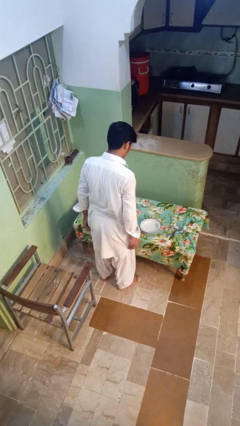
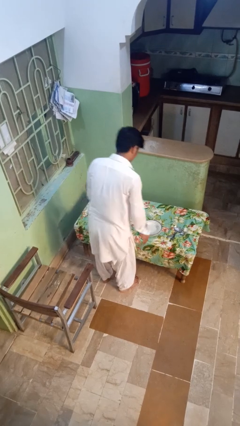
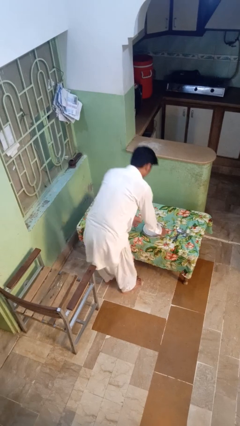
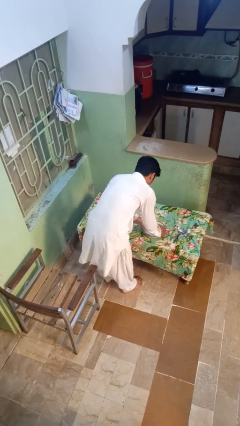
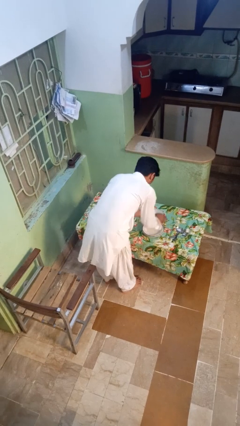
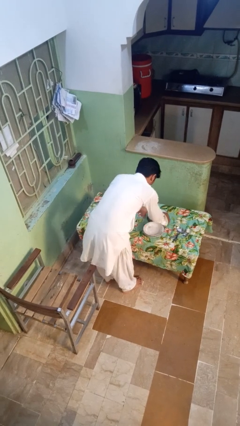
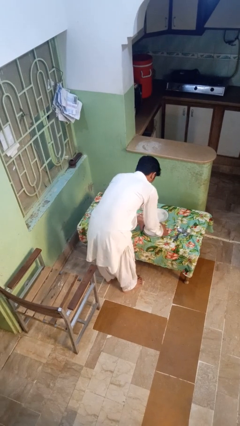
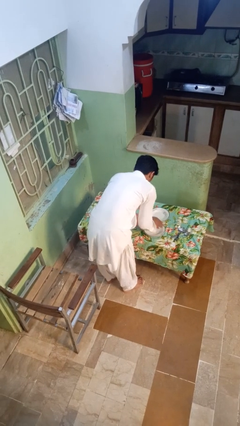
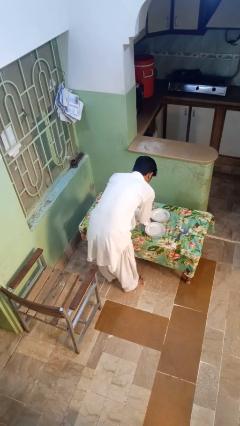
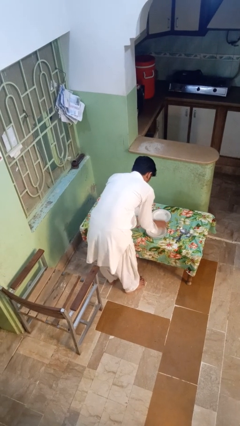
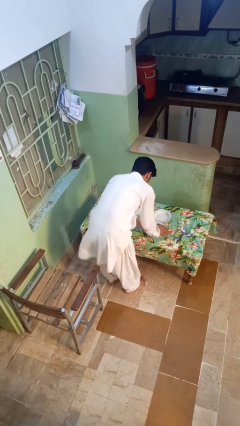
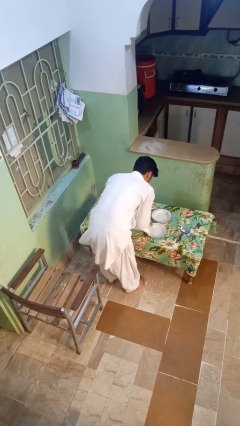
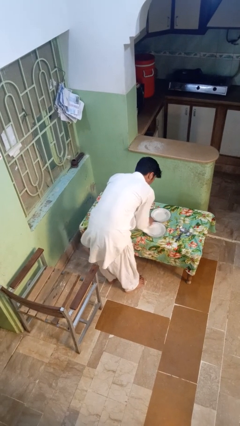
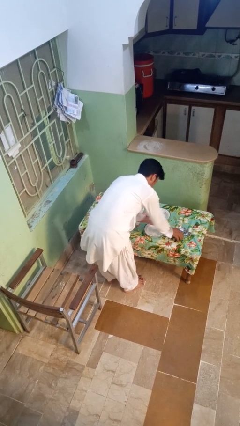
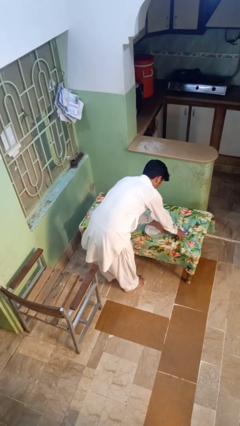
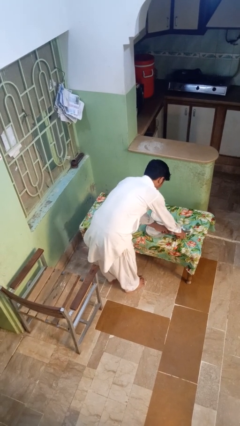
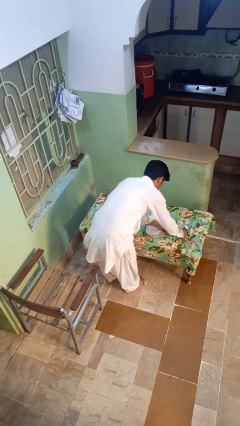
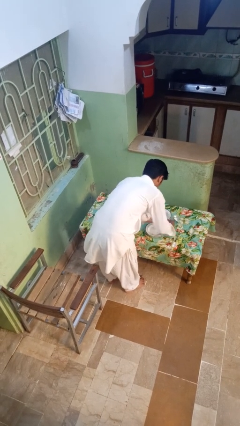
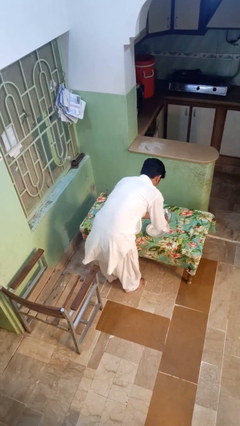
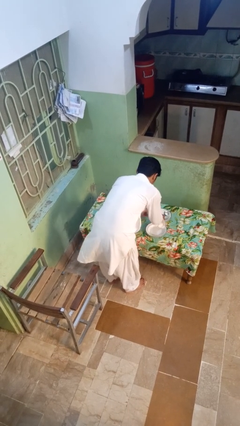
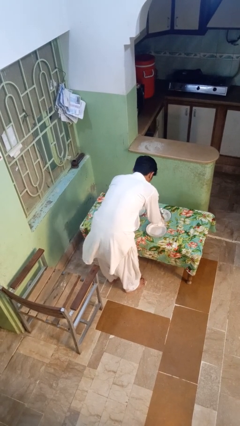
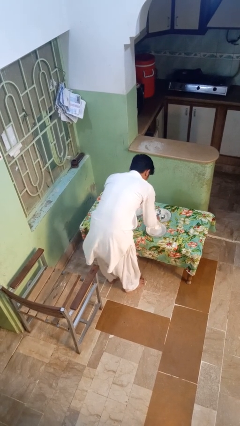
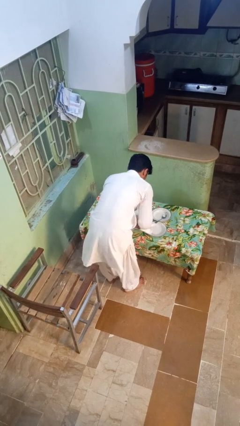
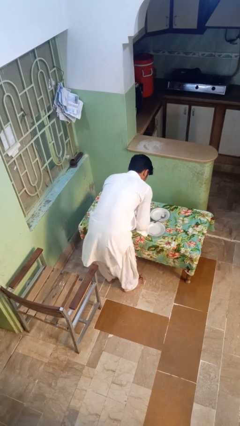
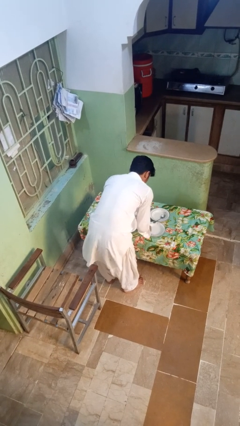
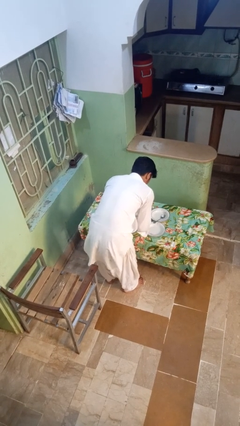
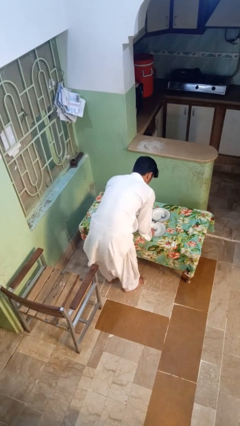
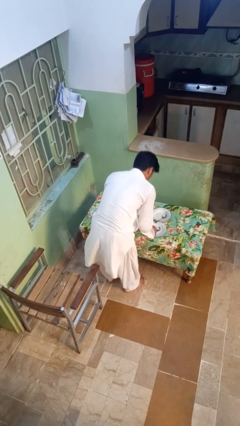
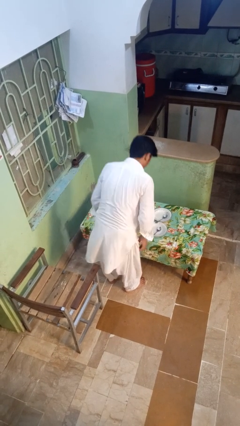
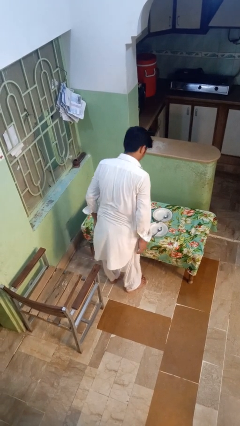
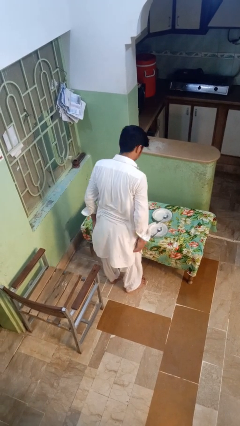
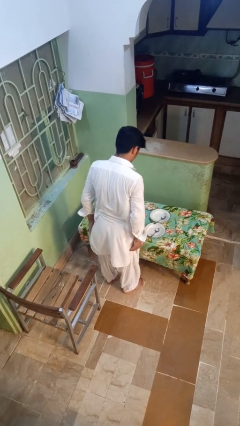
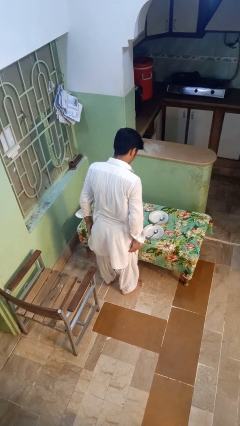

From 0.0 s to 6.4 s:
person sets table

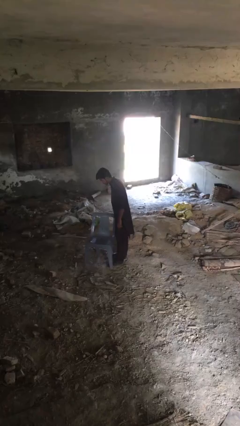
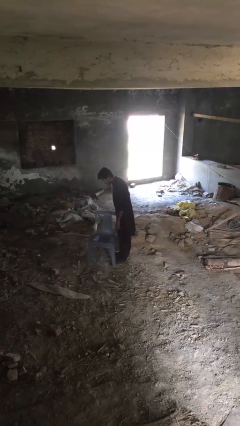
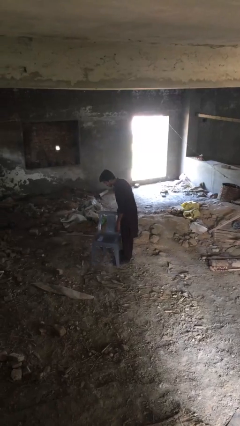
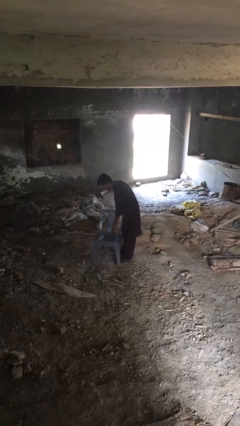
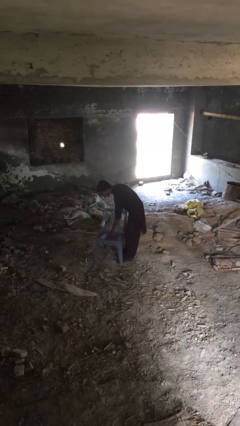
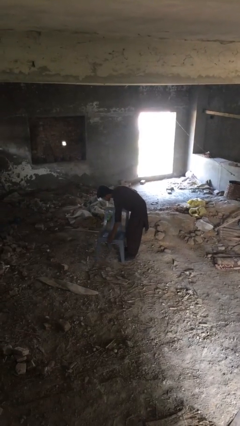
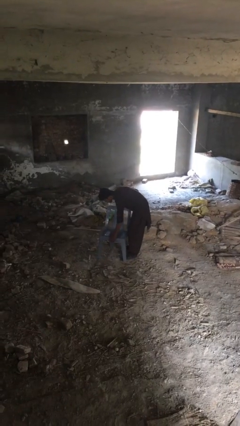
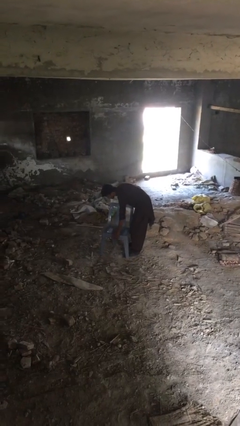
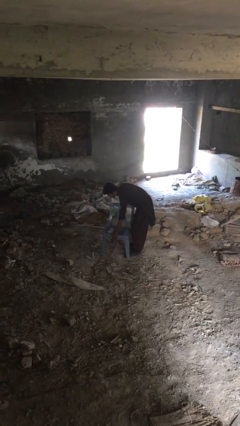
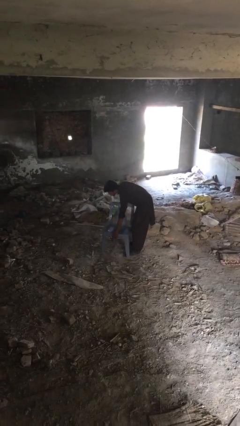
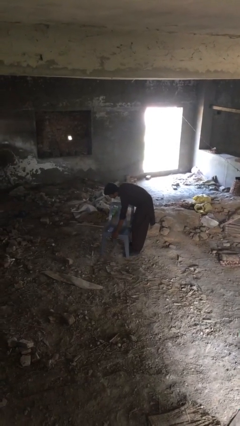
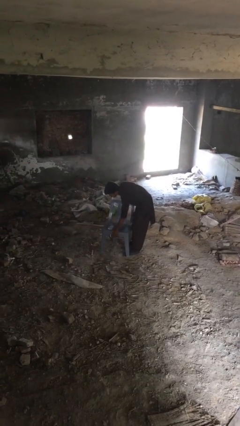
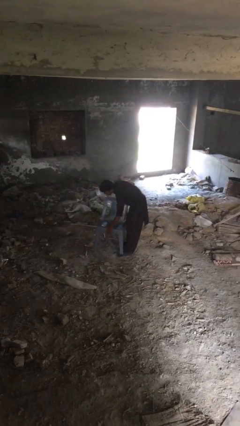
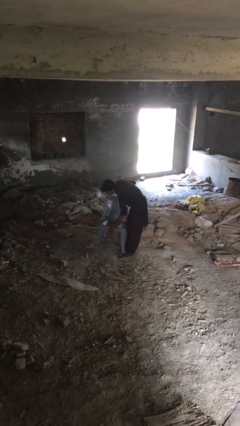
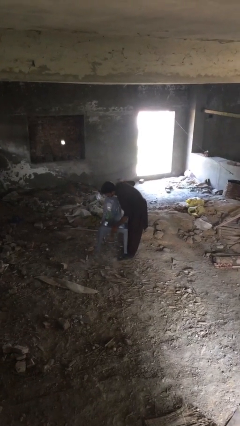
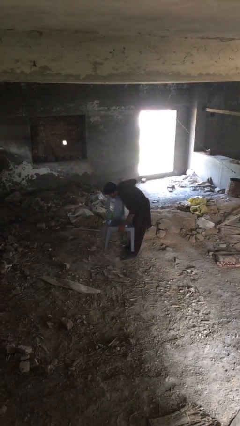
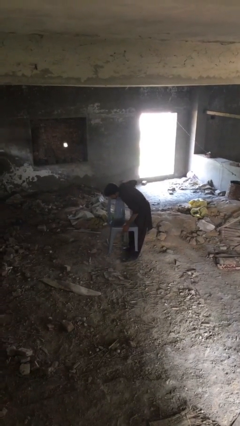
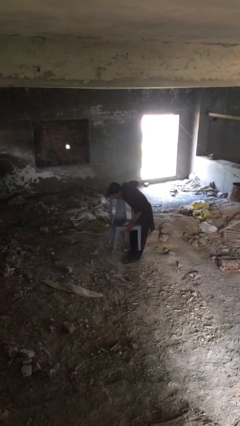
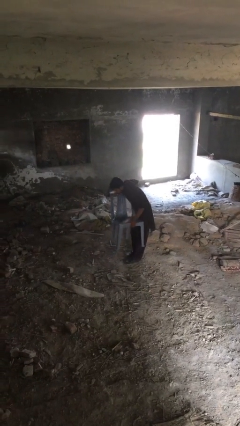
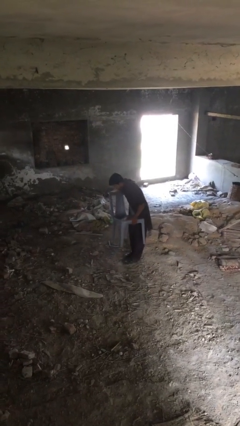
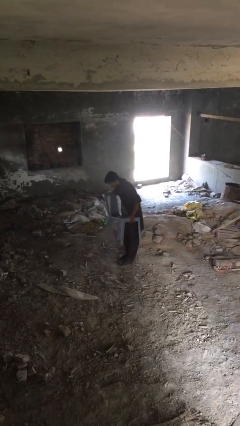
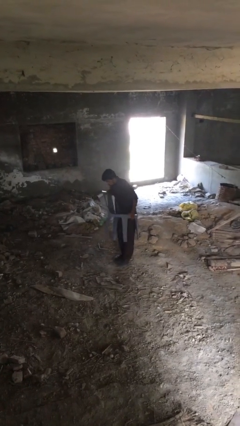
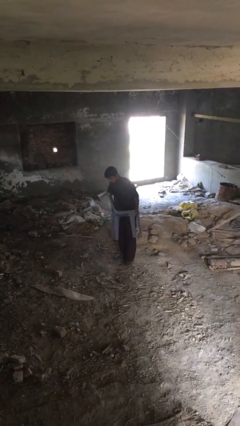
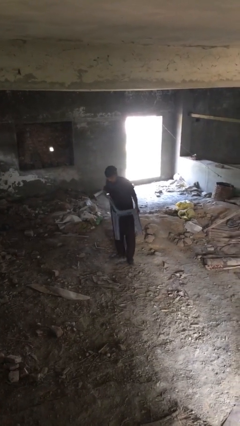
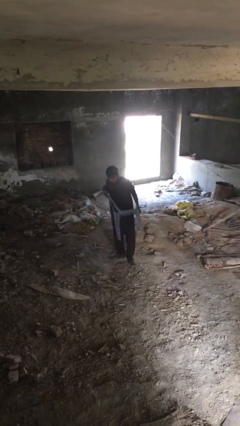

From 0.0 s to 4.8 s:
person picks up object from floor

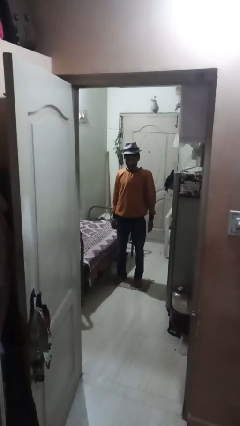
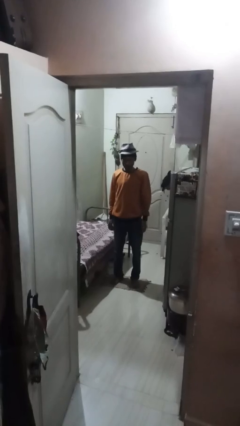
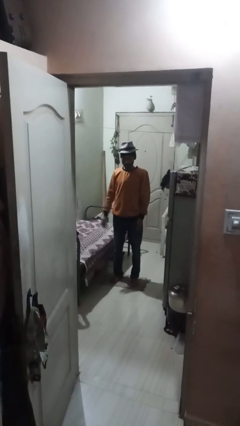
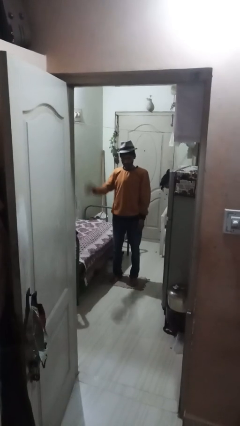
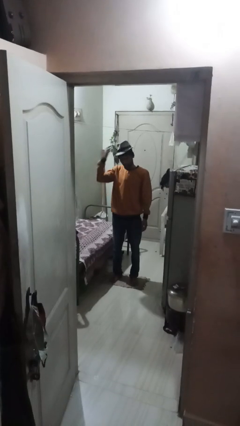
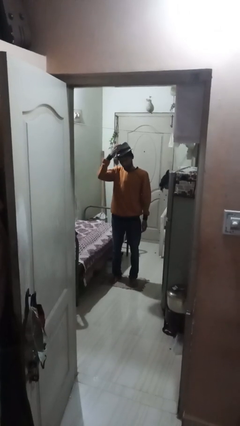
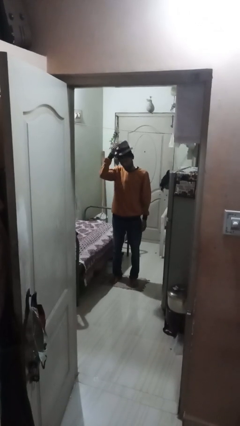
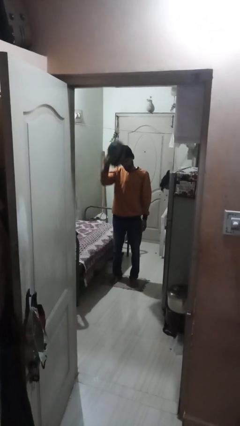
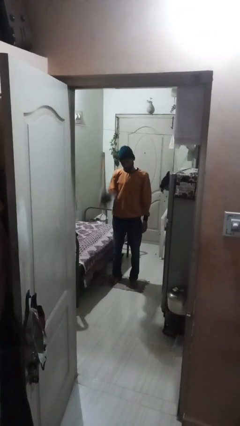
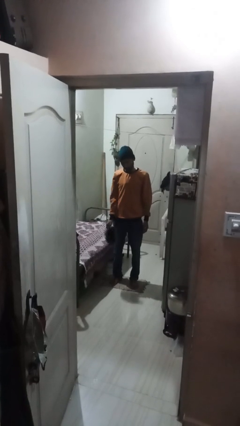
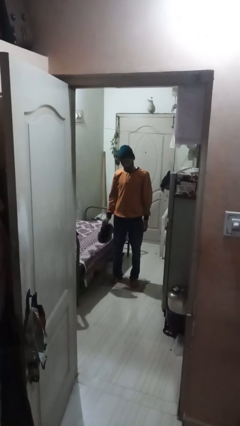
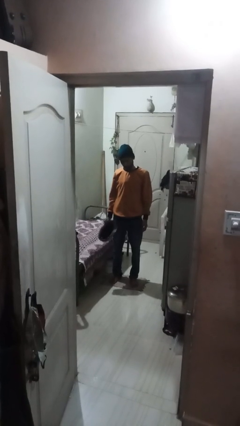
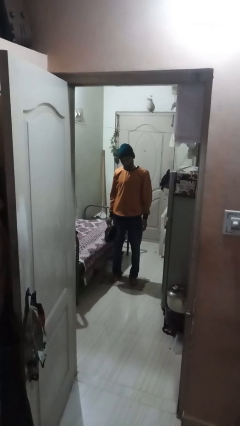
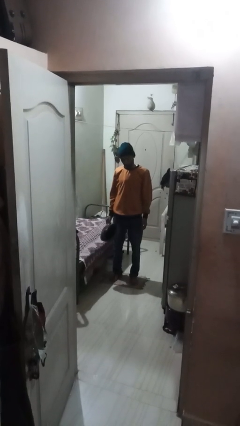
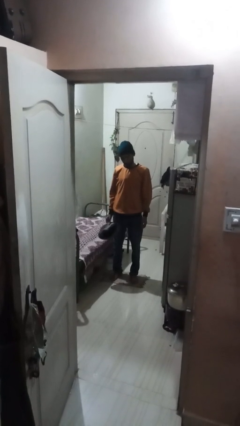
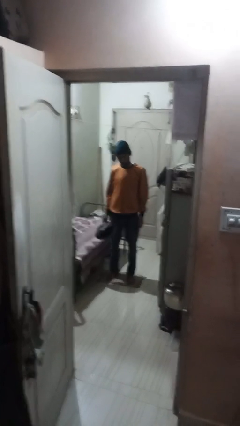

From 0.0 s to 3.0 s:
person takes off hat

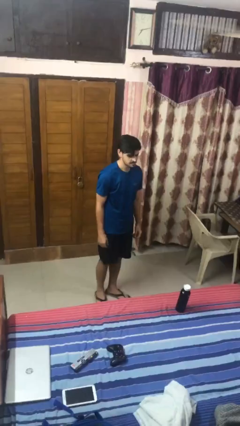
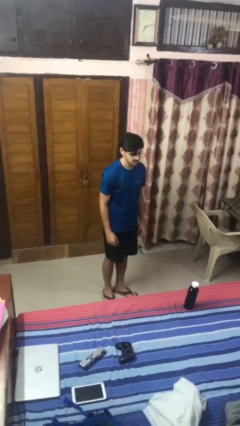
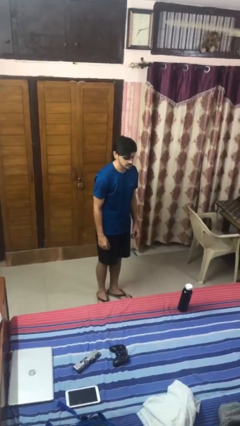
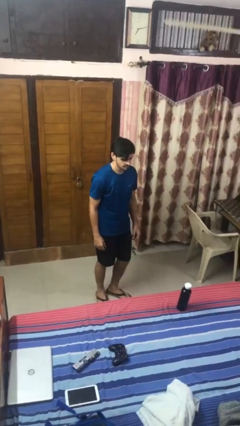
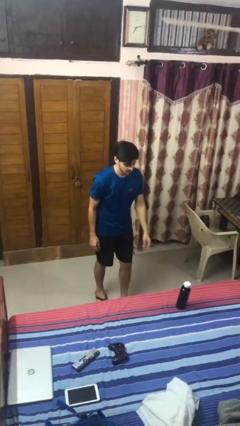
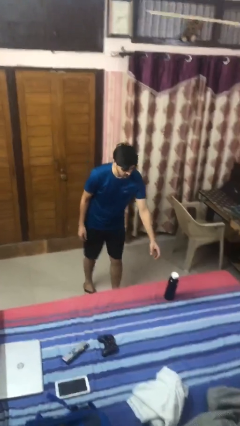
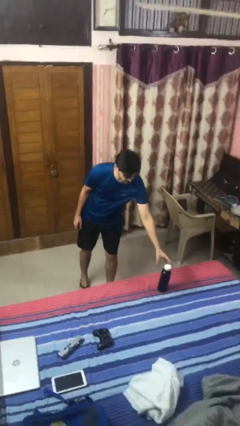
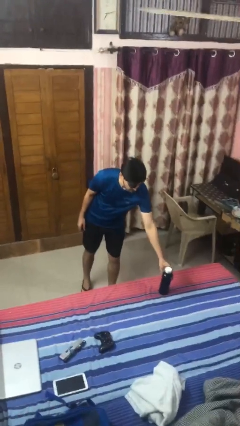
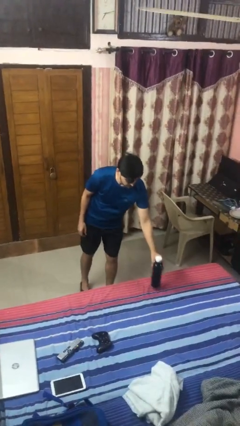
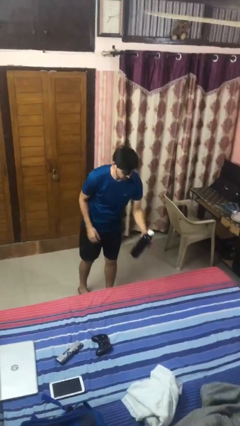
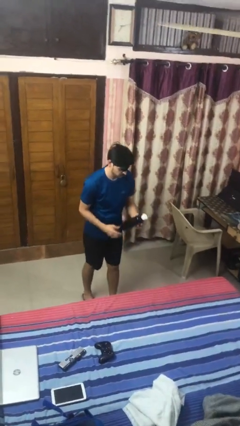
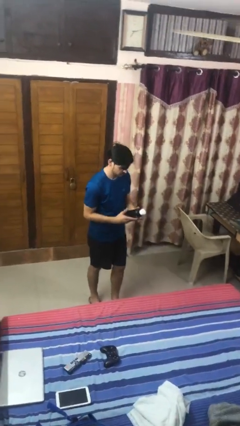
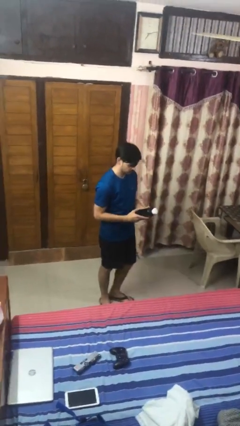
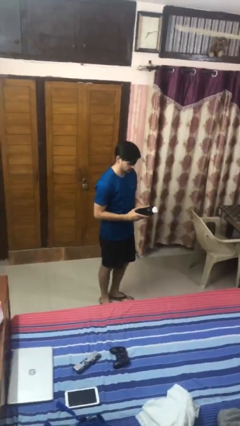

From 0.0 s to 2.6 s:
person picks up object from bed

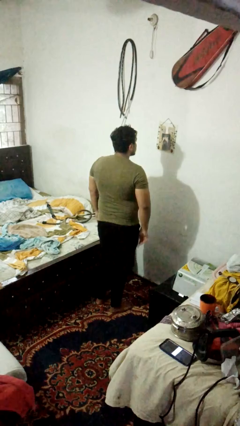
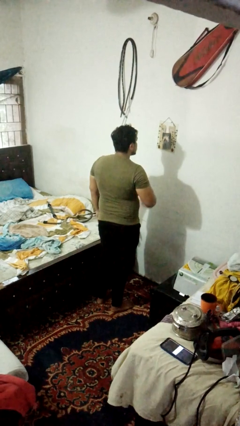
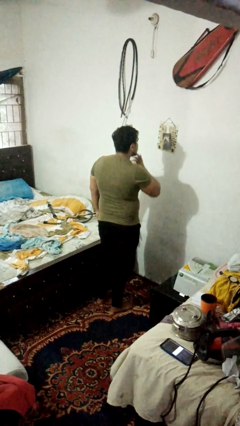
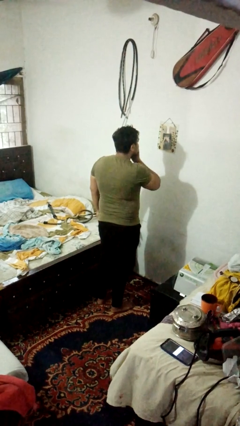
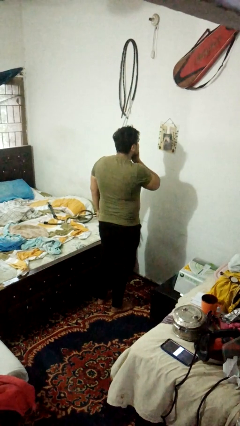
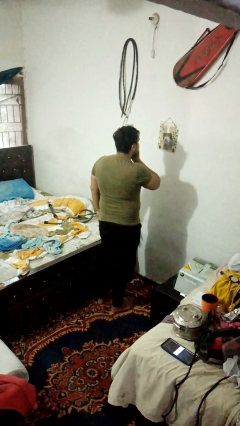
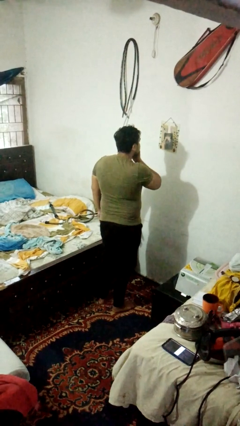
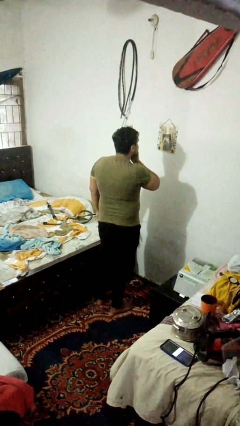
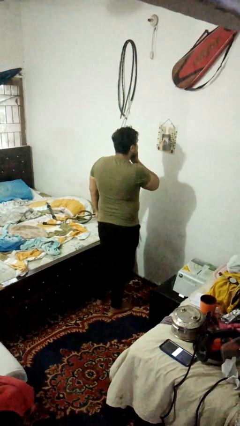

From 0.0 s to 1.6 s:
person strokes chin
